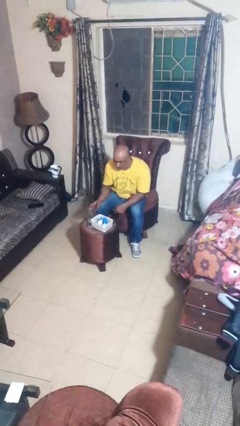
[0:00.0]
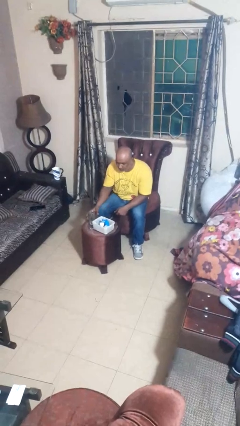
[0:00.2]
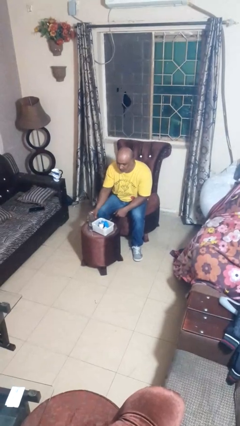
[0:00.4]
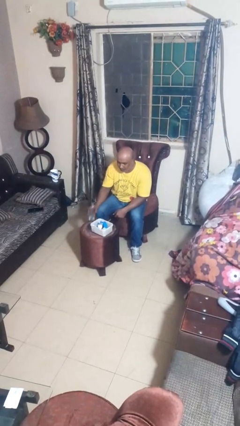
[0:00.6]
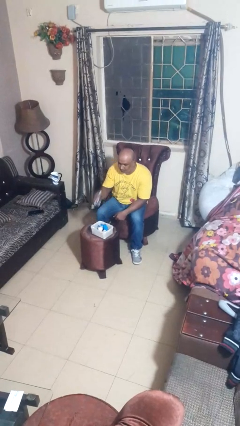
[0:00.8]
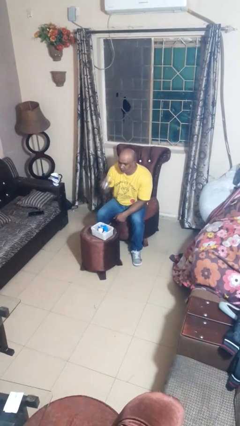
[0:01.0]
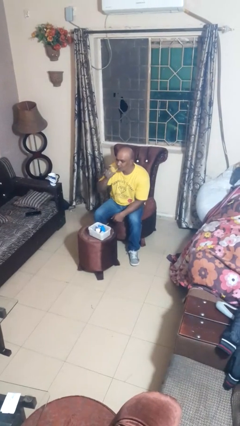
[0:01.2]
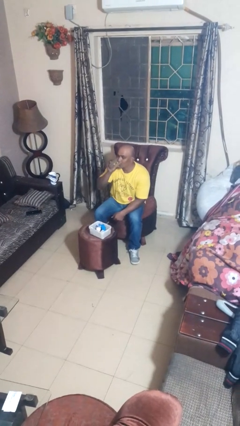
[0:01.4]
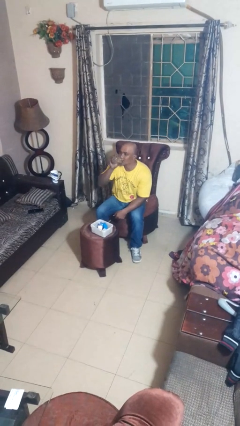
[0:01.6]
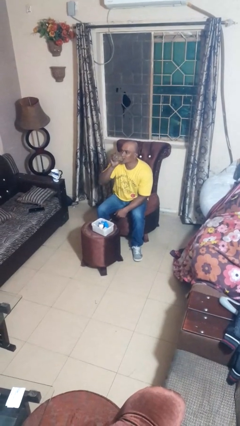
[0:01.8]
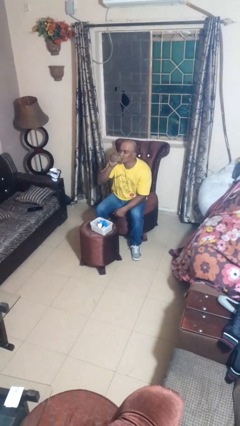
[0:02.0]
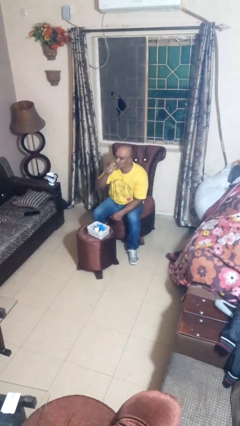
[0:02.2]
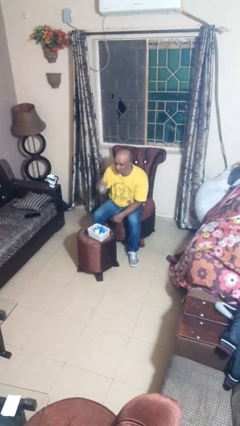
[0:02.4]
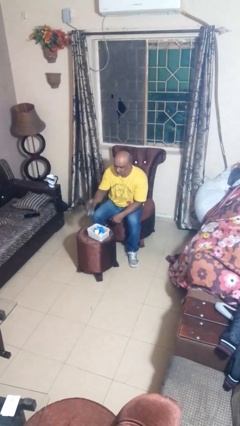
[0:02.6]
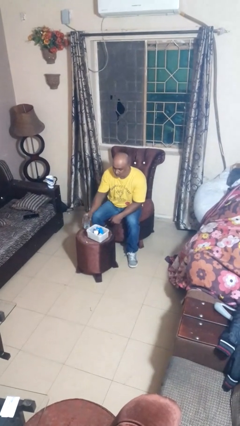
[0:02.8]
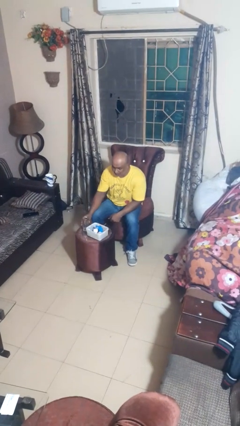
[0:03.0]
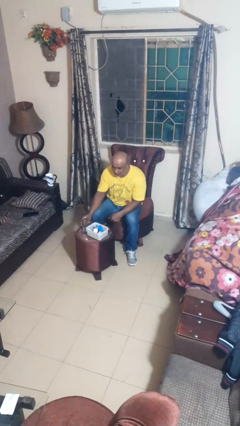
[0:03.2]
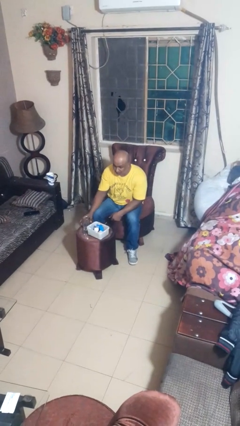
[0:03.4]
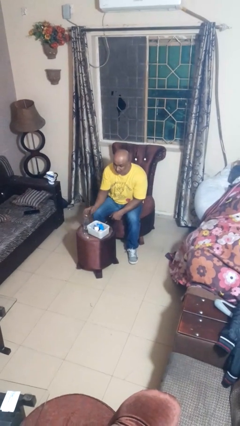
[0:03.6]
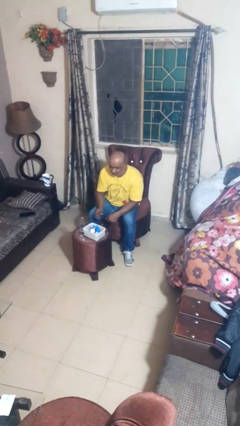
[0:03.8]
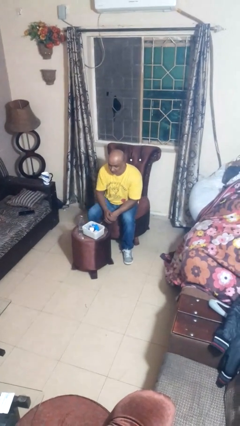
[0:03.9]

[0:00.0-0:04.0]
person drinks from cup

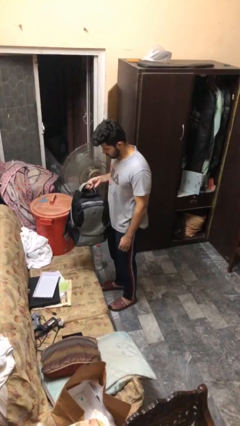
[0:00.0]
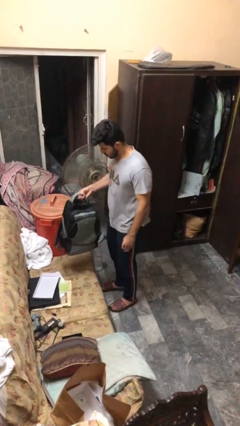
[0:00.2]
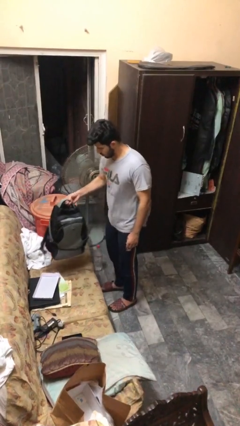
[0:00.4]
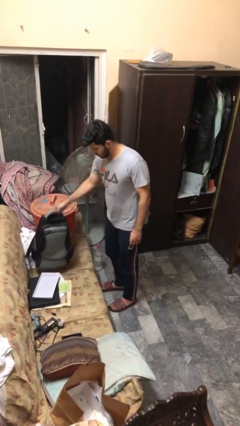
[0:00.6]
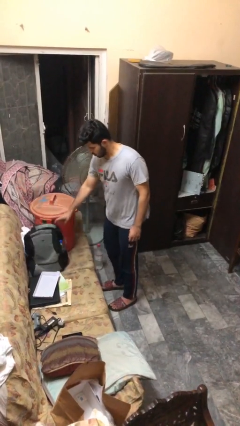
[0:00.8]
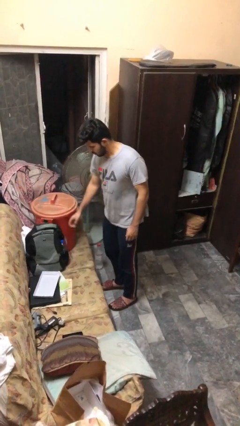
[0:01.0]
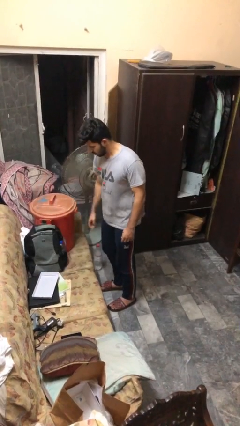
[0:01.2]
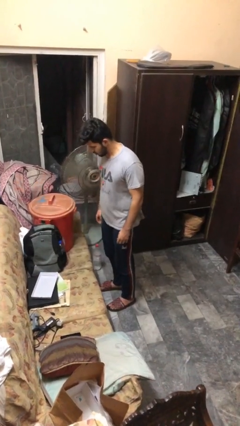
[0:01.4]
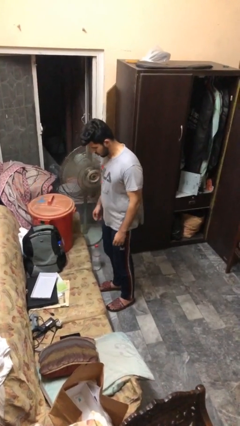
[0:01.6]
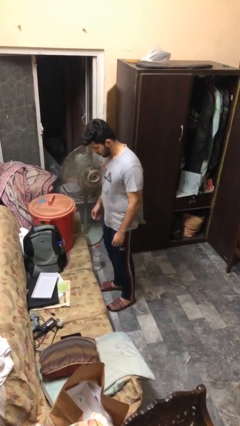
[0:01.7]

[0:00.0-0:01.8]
person puts down object on couch

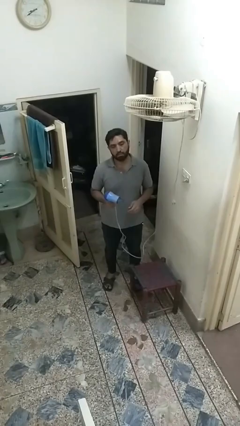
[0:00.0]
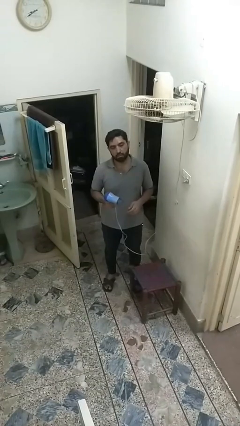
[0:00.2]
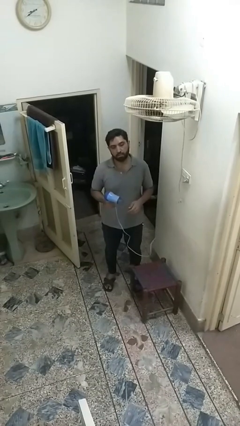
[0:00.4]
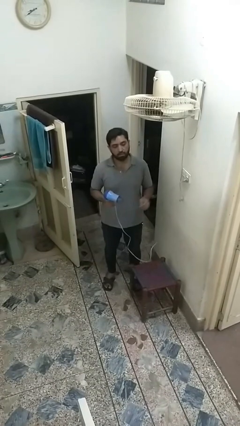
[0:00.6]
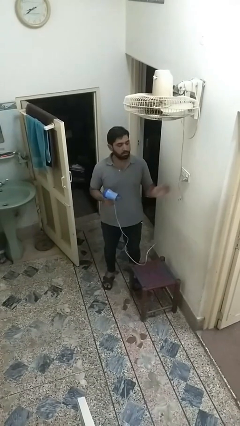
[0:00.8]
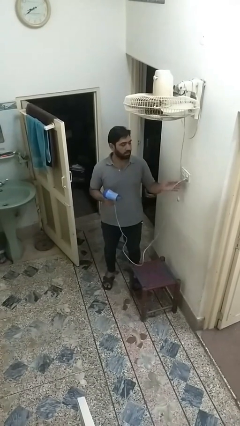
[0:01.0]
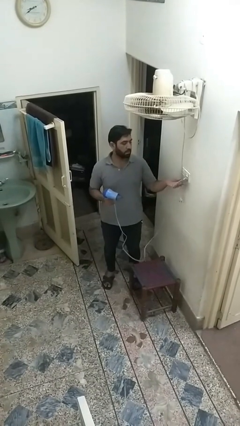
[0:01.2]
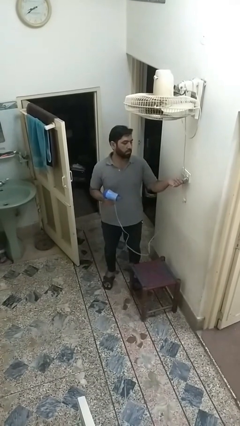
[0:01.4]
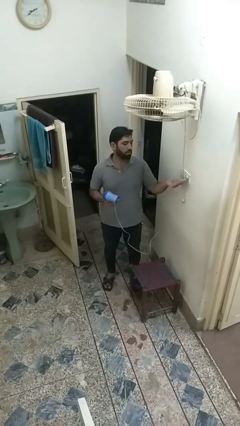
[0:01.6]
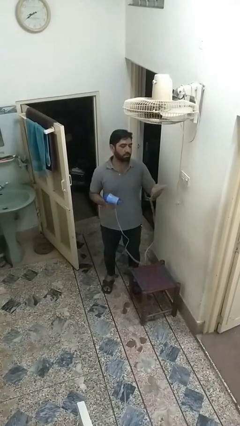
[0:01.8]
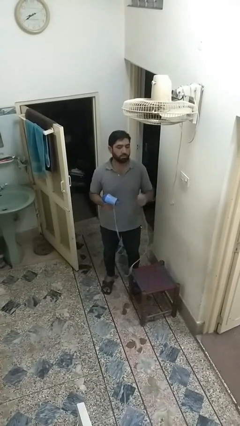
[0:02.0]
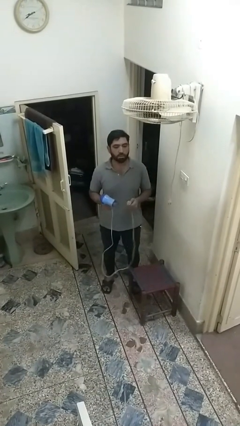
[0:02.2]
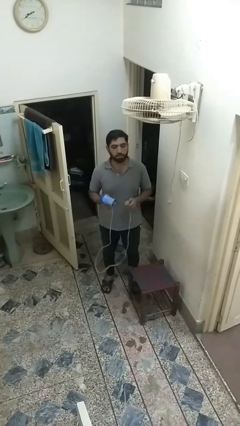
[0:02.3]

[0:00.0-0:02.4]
person unplugs from electrical socket

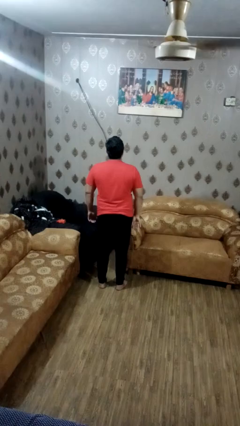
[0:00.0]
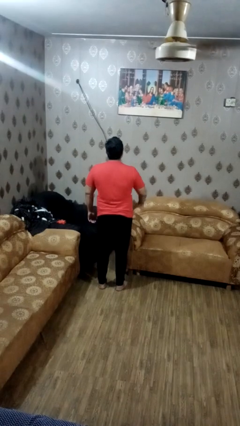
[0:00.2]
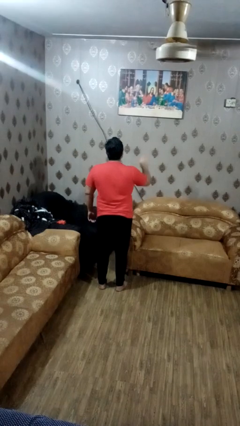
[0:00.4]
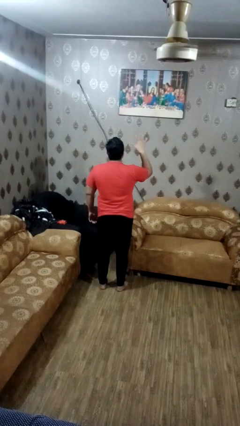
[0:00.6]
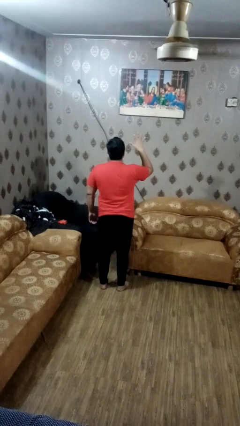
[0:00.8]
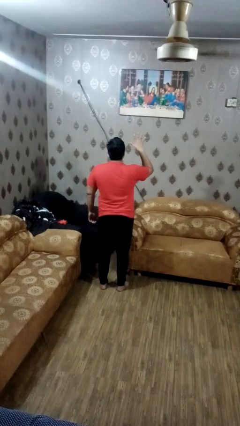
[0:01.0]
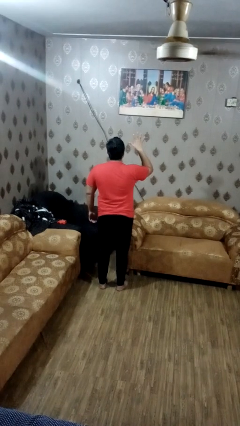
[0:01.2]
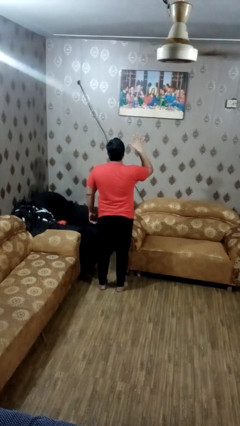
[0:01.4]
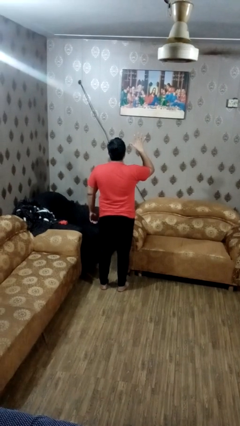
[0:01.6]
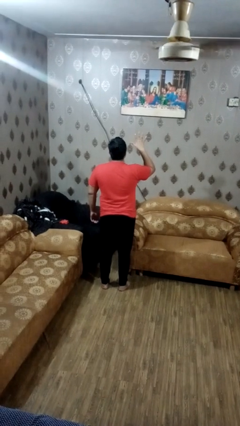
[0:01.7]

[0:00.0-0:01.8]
person gestures number five

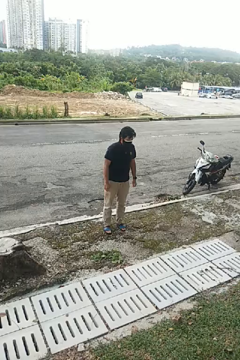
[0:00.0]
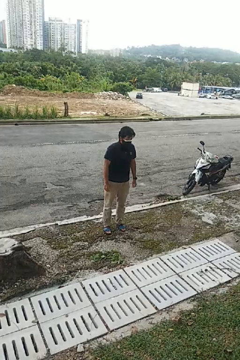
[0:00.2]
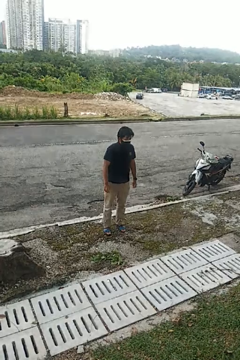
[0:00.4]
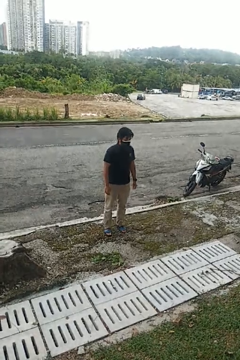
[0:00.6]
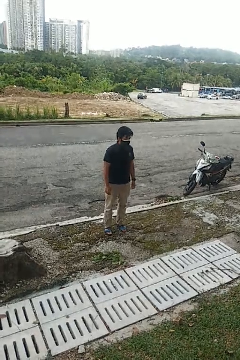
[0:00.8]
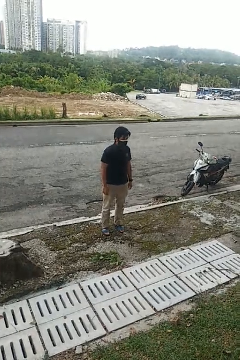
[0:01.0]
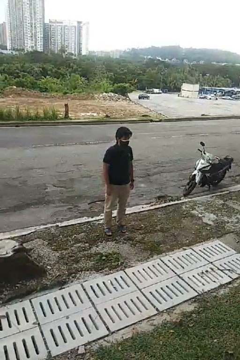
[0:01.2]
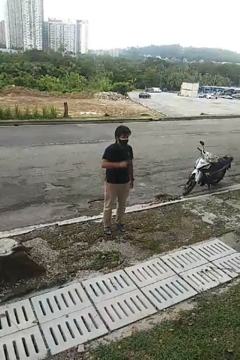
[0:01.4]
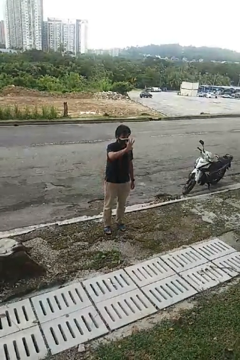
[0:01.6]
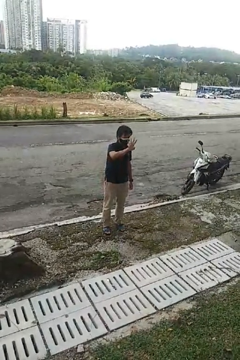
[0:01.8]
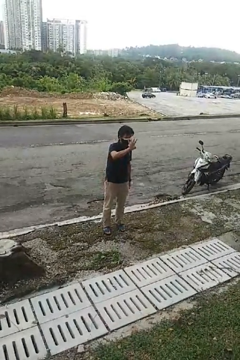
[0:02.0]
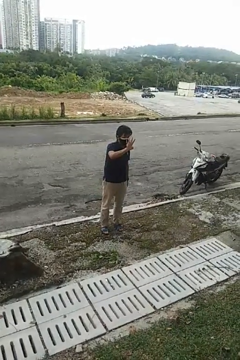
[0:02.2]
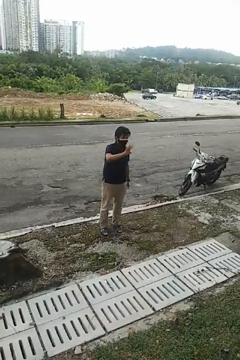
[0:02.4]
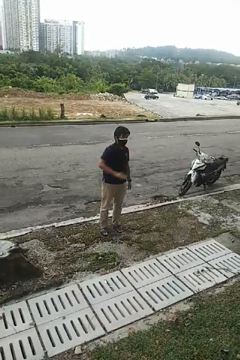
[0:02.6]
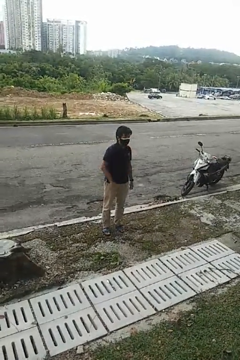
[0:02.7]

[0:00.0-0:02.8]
person gestures number four

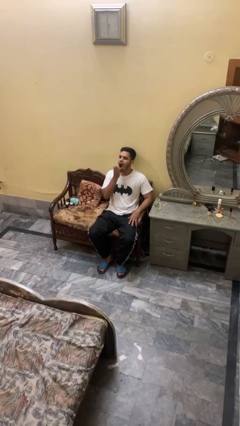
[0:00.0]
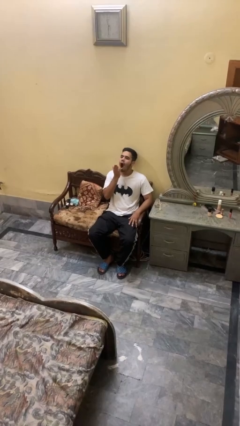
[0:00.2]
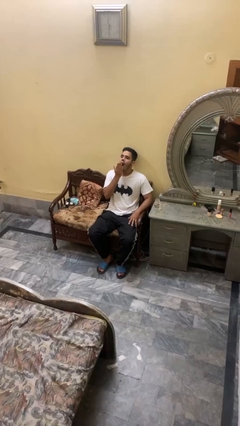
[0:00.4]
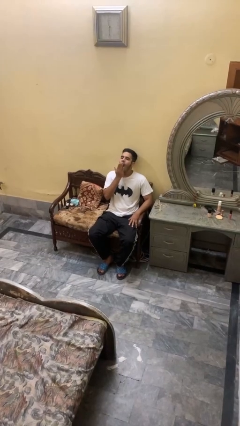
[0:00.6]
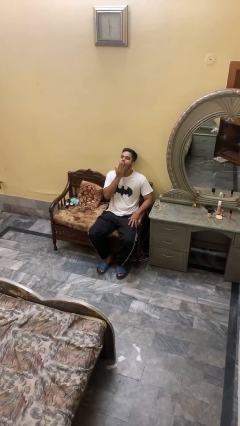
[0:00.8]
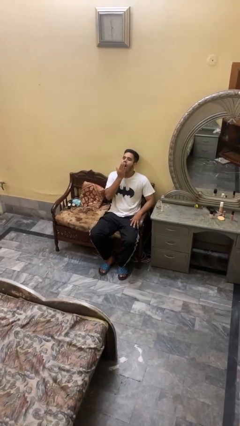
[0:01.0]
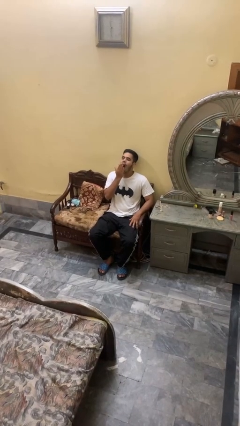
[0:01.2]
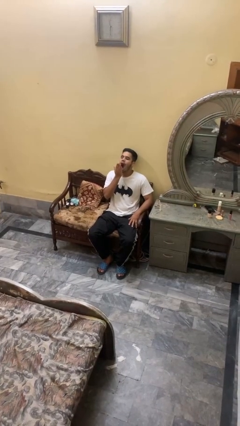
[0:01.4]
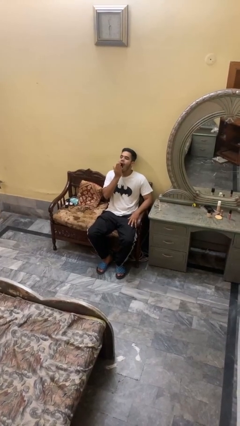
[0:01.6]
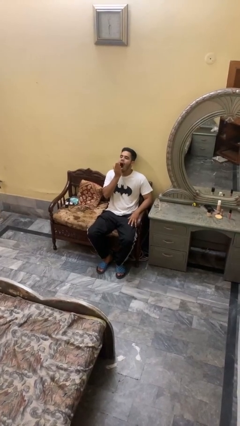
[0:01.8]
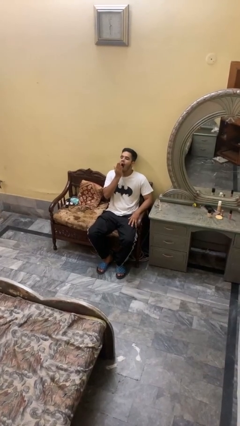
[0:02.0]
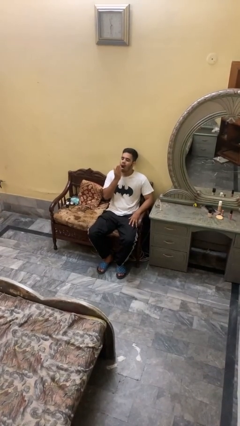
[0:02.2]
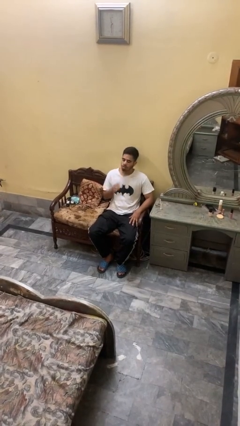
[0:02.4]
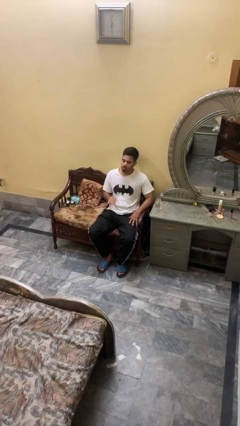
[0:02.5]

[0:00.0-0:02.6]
person yawns

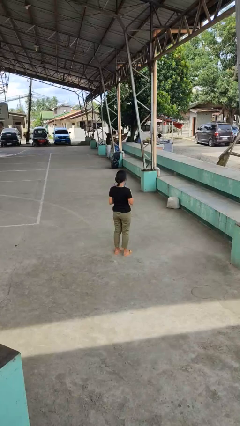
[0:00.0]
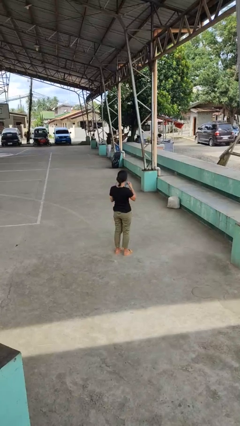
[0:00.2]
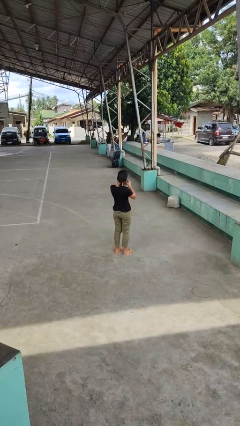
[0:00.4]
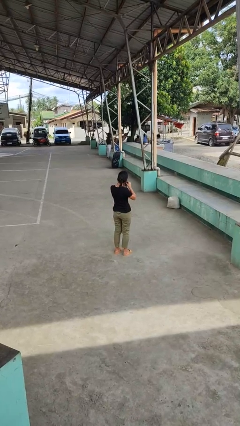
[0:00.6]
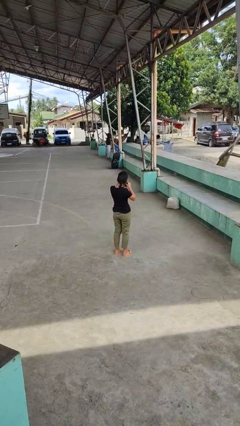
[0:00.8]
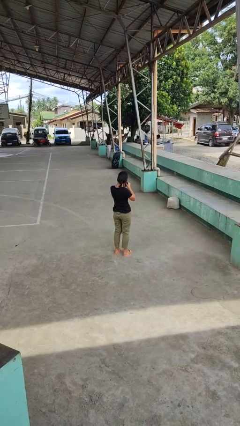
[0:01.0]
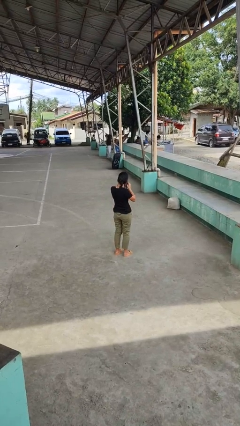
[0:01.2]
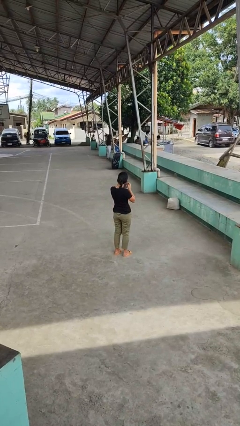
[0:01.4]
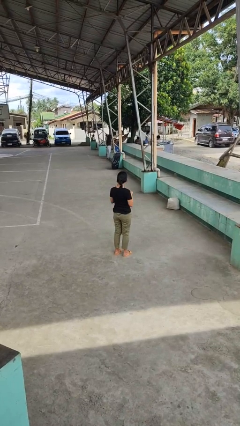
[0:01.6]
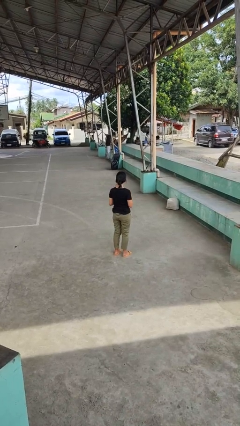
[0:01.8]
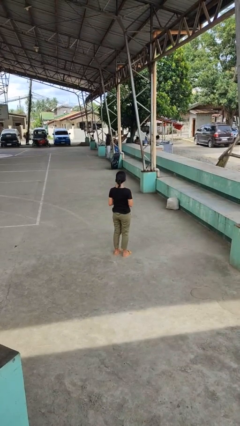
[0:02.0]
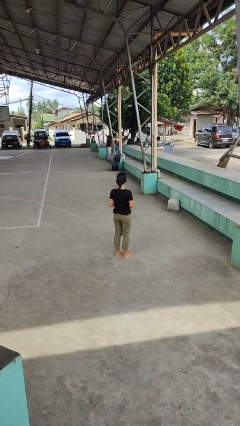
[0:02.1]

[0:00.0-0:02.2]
person takes off earrings

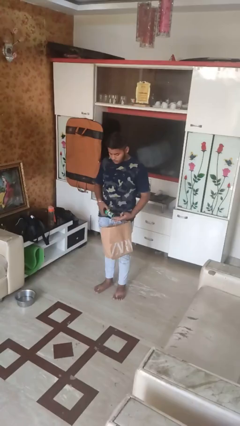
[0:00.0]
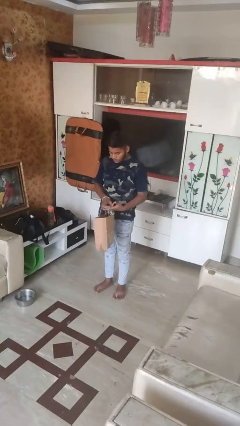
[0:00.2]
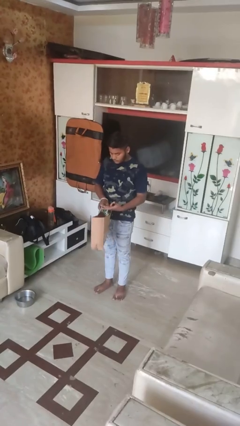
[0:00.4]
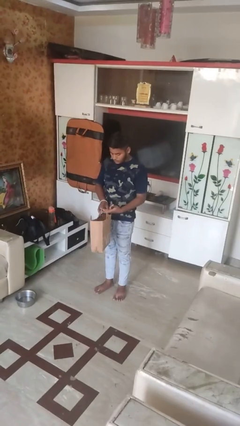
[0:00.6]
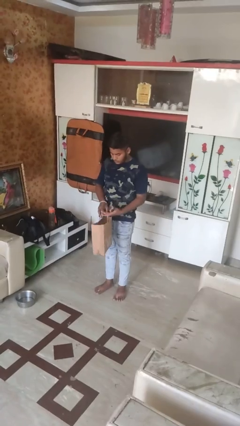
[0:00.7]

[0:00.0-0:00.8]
person puts object into bag
